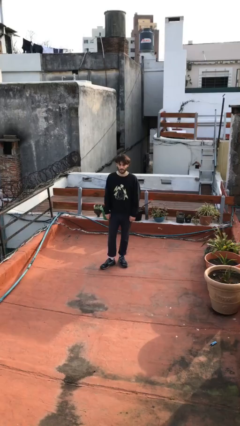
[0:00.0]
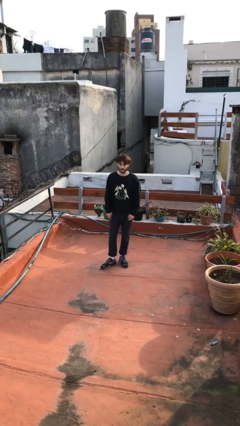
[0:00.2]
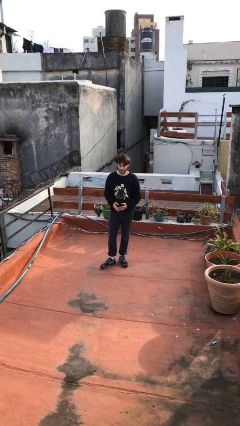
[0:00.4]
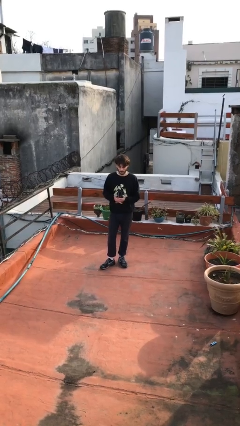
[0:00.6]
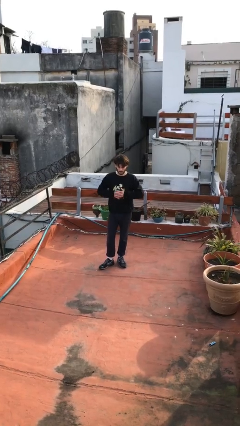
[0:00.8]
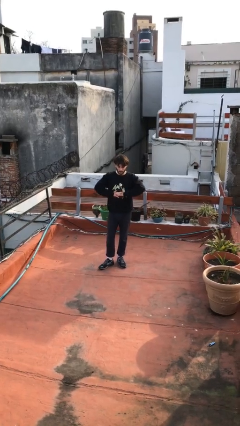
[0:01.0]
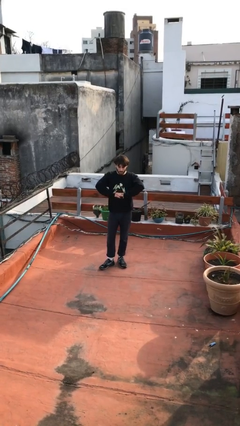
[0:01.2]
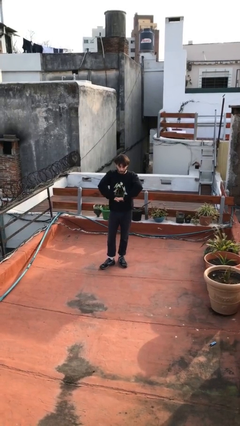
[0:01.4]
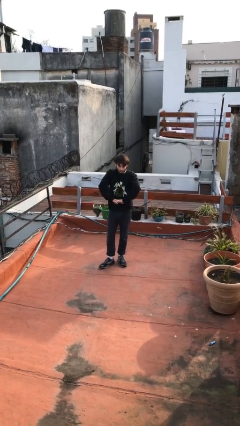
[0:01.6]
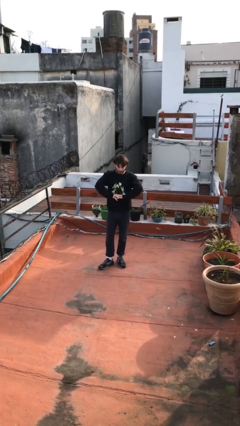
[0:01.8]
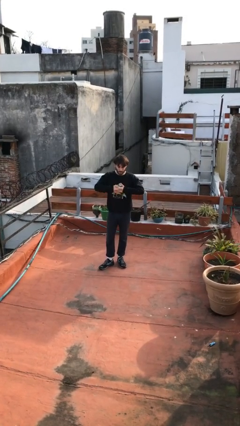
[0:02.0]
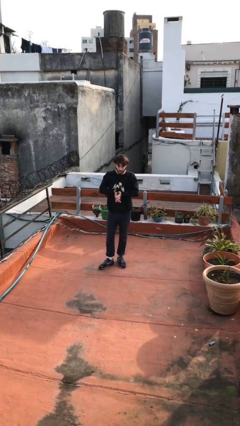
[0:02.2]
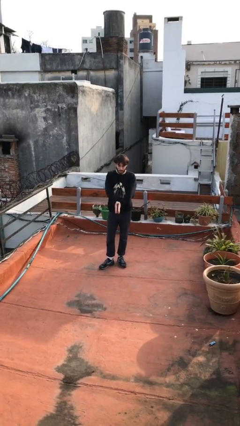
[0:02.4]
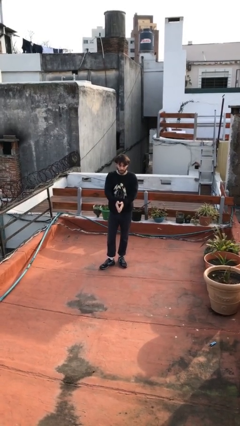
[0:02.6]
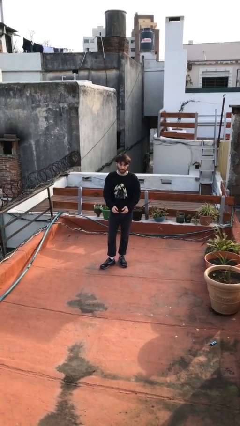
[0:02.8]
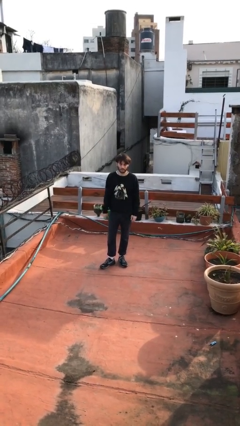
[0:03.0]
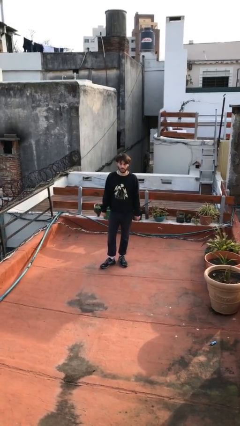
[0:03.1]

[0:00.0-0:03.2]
person cracks knuckles

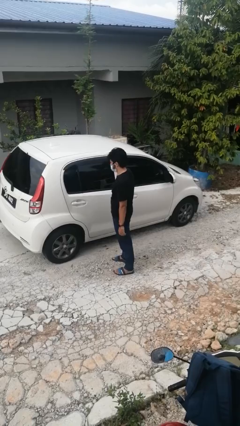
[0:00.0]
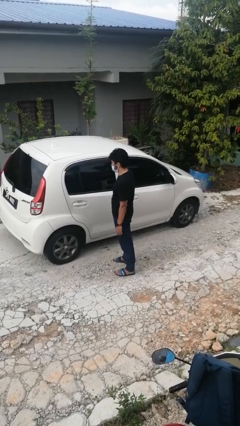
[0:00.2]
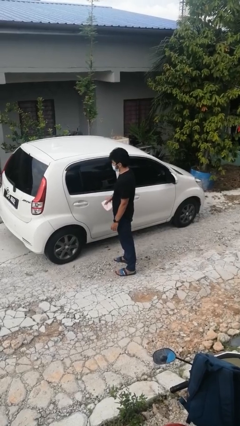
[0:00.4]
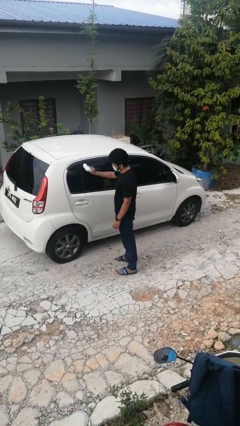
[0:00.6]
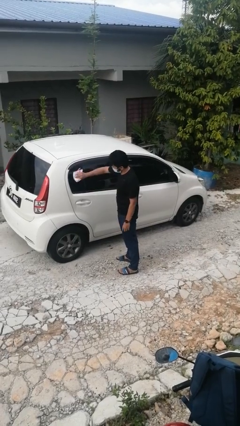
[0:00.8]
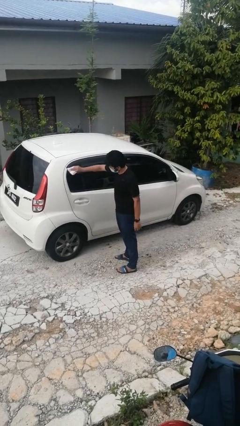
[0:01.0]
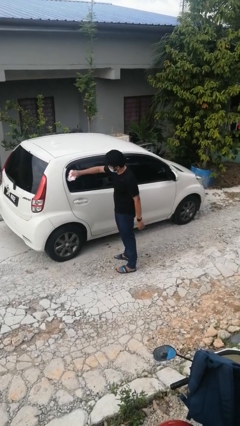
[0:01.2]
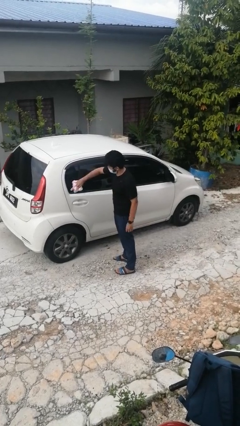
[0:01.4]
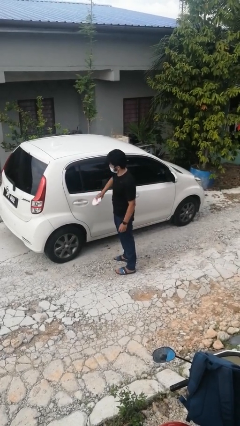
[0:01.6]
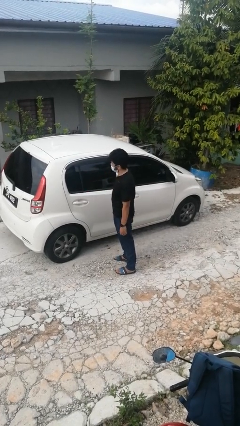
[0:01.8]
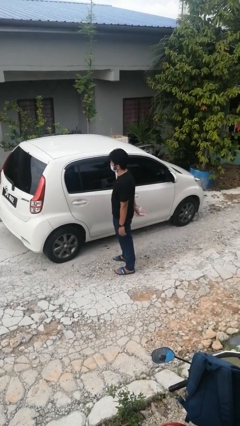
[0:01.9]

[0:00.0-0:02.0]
person polishes car with rag

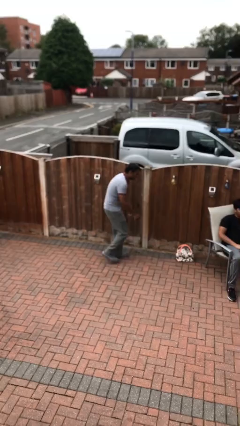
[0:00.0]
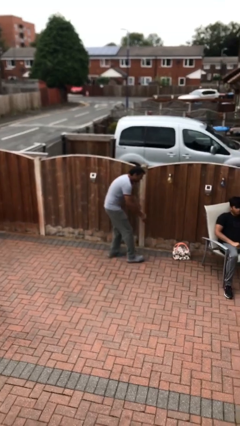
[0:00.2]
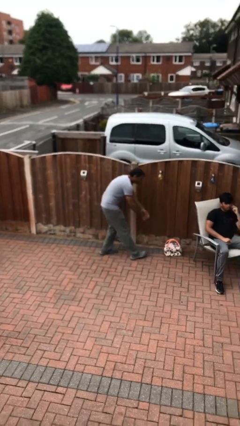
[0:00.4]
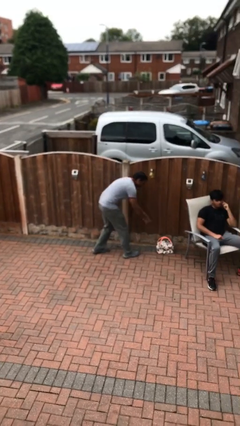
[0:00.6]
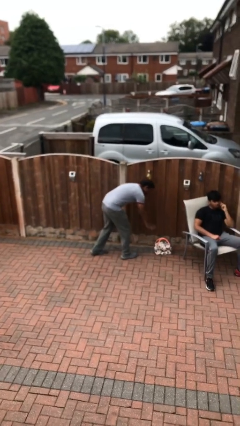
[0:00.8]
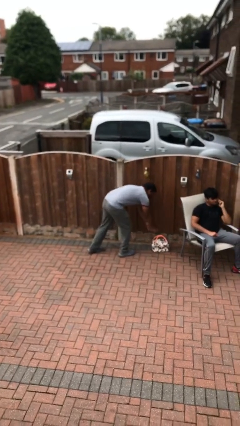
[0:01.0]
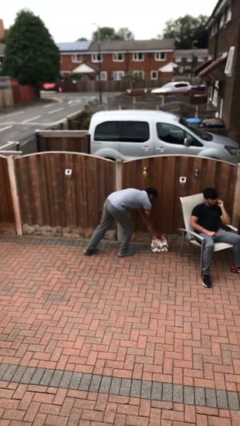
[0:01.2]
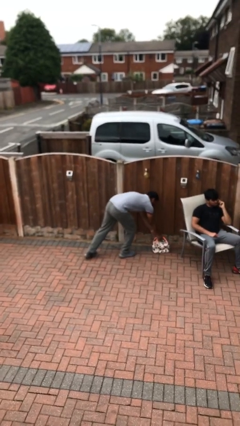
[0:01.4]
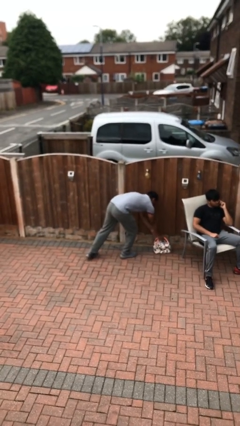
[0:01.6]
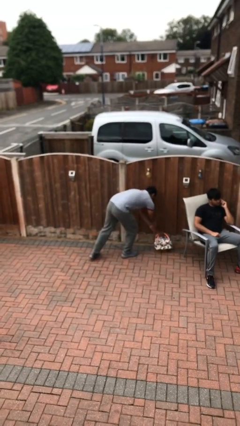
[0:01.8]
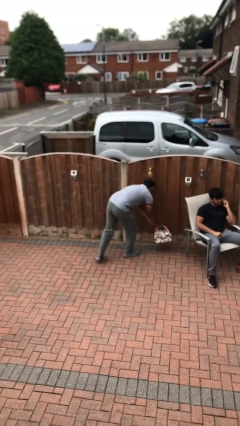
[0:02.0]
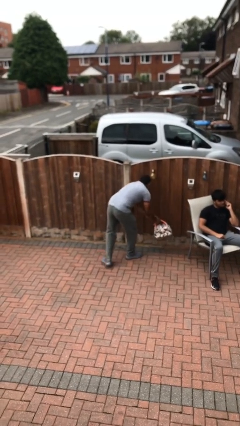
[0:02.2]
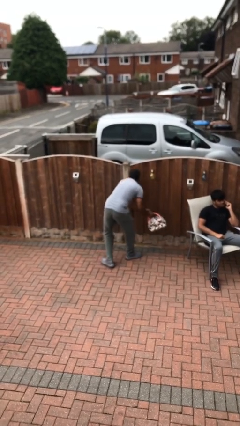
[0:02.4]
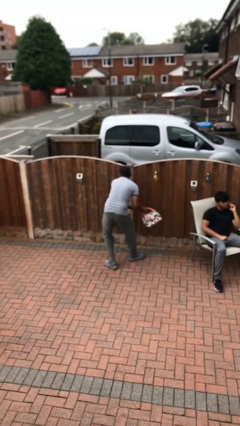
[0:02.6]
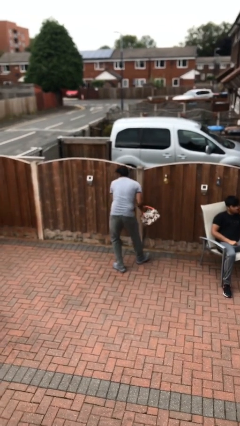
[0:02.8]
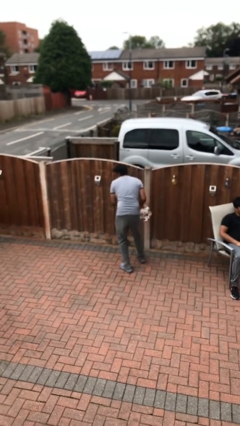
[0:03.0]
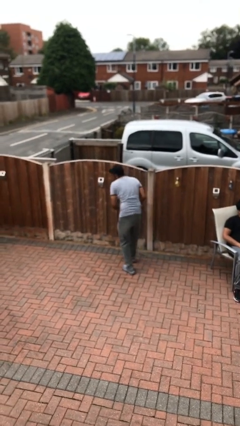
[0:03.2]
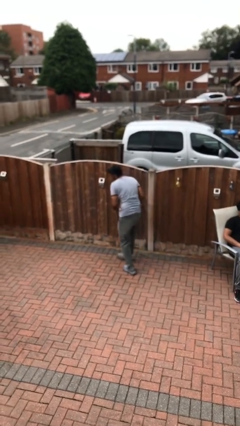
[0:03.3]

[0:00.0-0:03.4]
person steals object from person

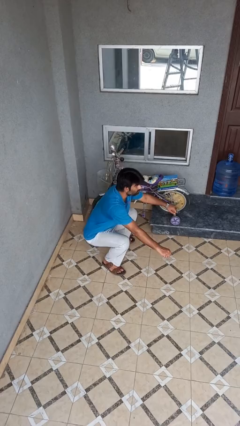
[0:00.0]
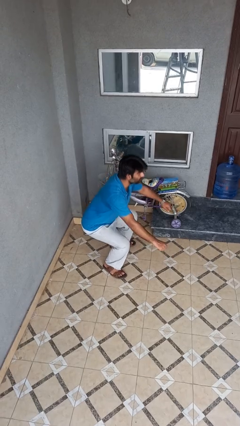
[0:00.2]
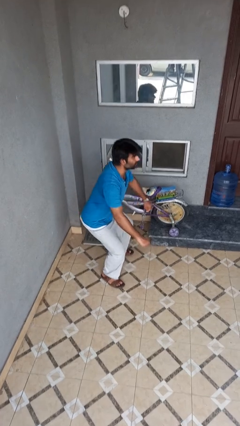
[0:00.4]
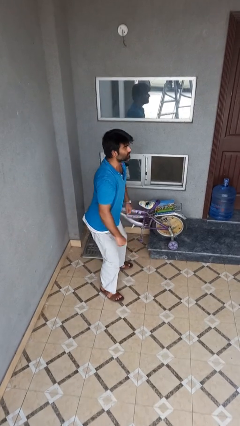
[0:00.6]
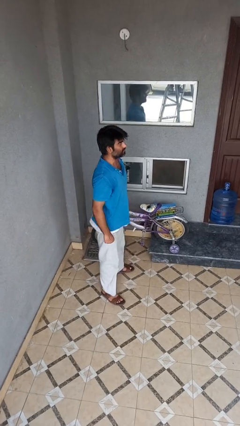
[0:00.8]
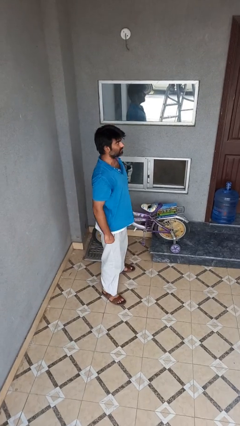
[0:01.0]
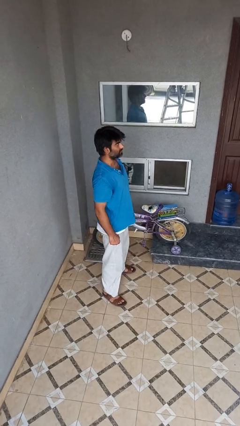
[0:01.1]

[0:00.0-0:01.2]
person stands up

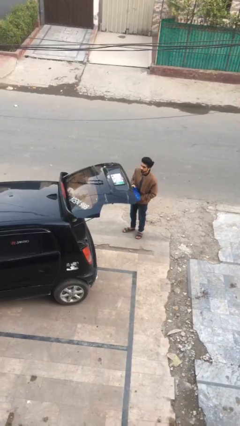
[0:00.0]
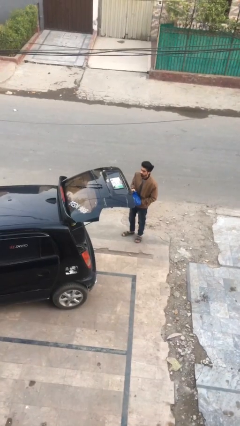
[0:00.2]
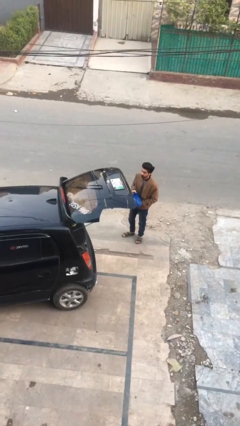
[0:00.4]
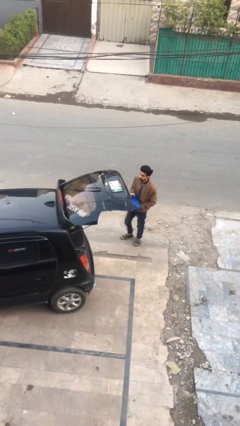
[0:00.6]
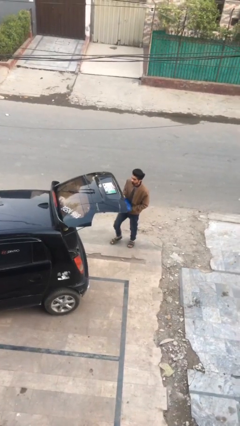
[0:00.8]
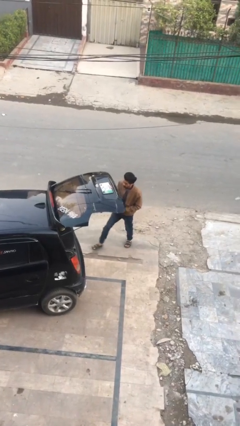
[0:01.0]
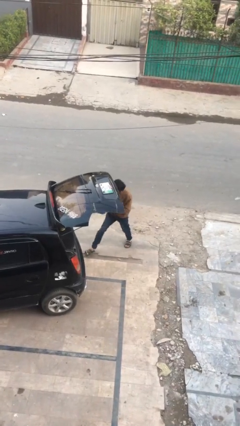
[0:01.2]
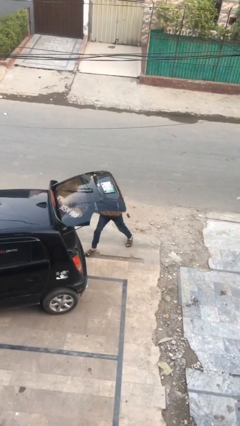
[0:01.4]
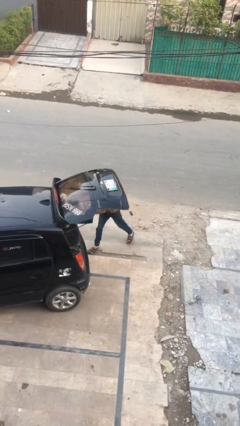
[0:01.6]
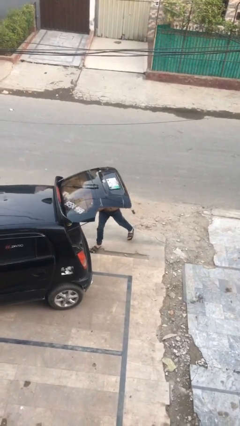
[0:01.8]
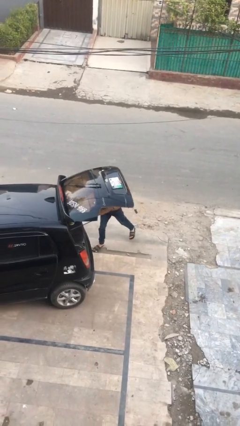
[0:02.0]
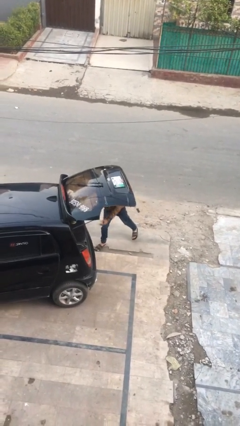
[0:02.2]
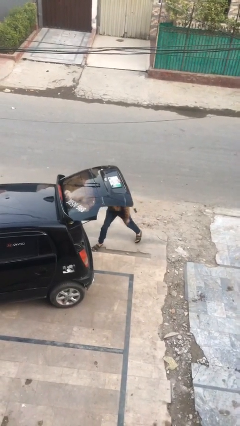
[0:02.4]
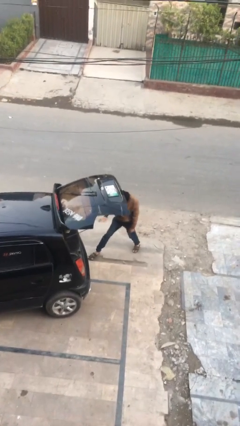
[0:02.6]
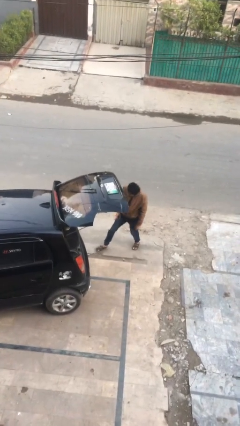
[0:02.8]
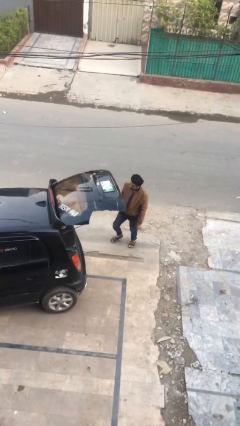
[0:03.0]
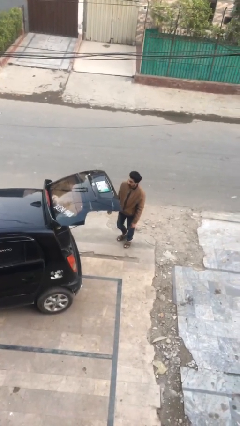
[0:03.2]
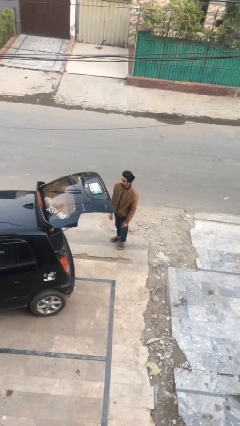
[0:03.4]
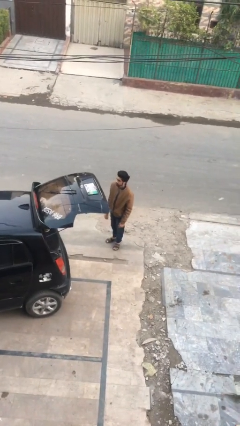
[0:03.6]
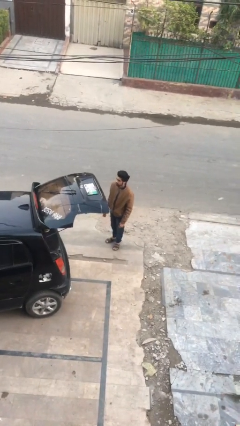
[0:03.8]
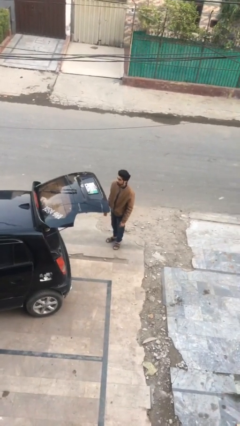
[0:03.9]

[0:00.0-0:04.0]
person loads car

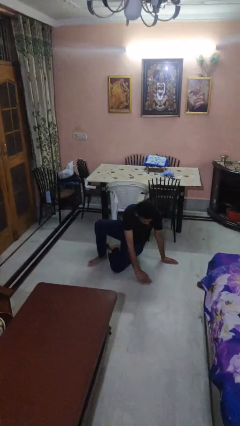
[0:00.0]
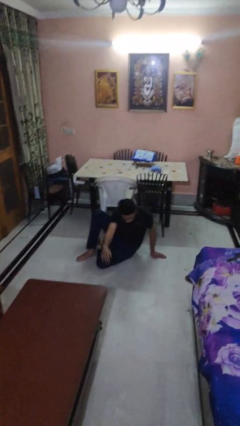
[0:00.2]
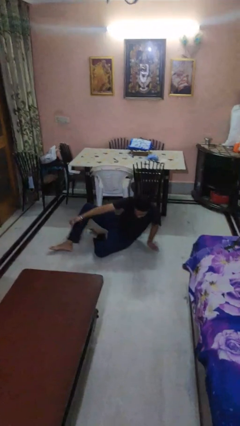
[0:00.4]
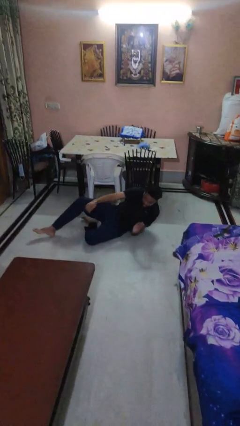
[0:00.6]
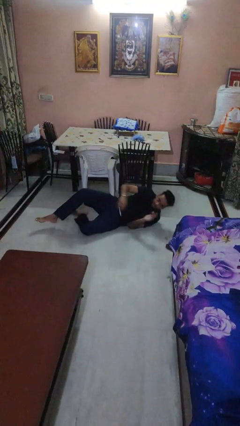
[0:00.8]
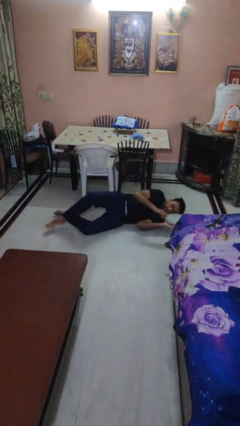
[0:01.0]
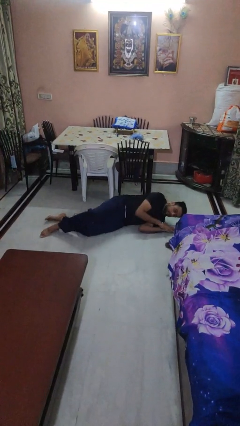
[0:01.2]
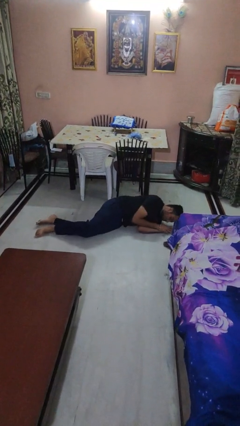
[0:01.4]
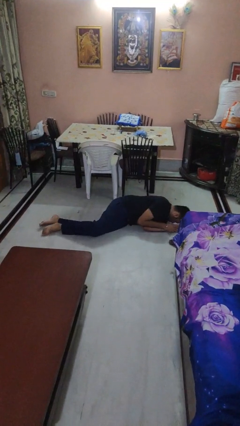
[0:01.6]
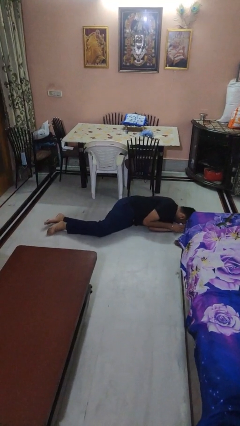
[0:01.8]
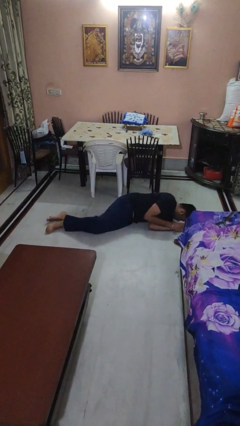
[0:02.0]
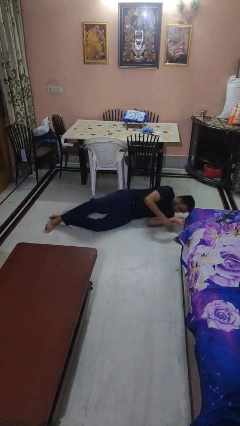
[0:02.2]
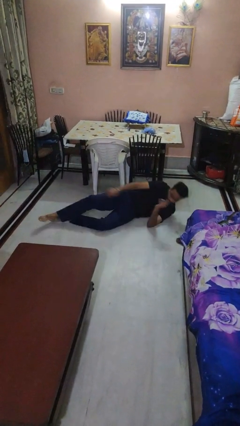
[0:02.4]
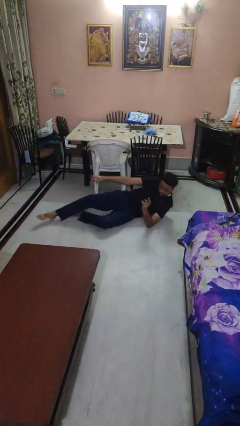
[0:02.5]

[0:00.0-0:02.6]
person lies down on floor

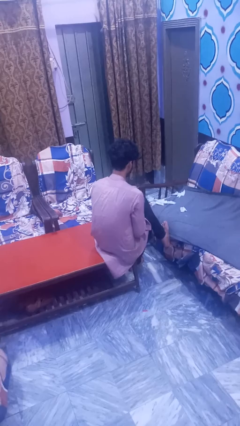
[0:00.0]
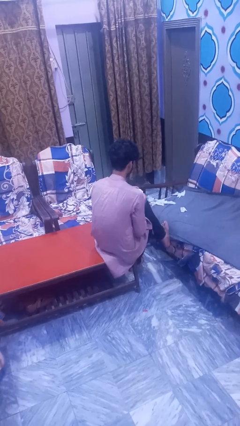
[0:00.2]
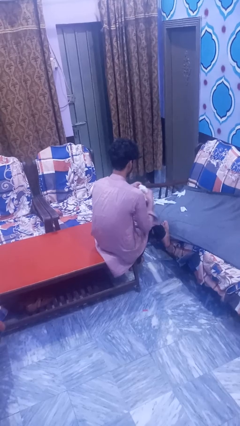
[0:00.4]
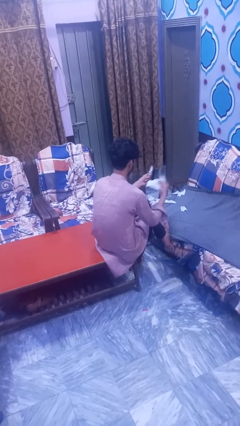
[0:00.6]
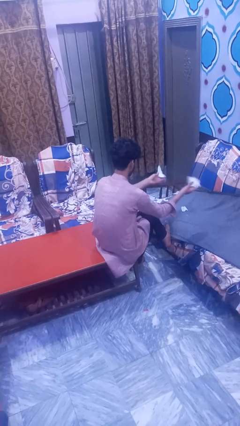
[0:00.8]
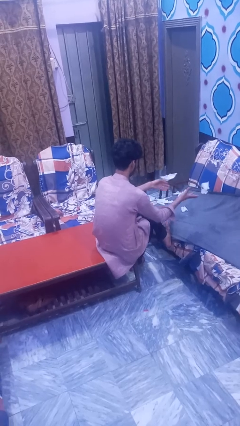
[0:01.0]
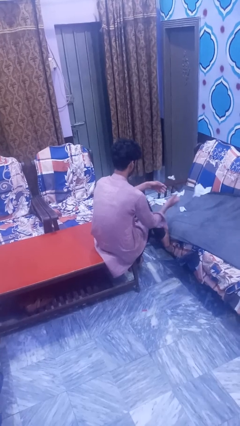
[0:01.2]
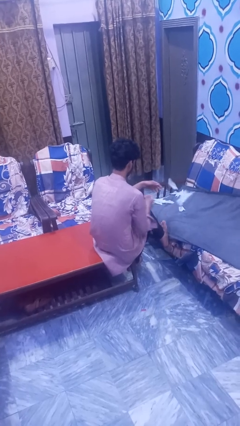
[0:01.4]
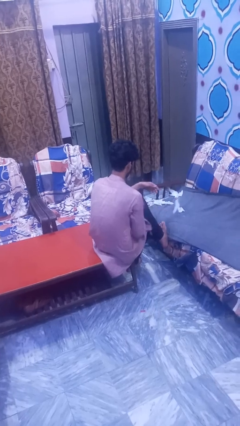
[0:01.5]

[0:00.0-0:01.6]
person tears paper
